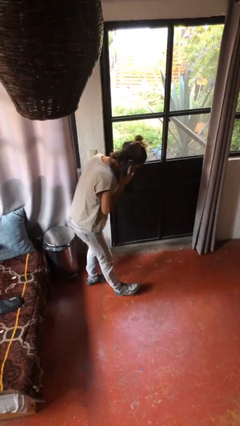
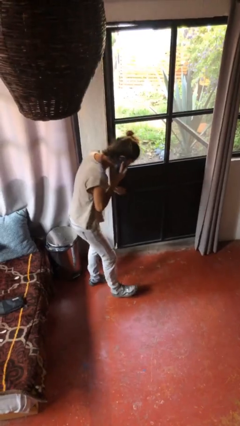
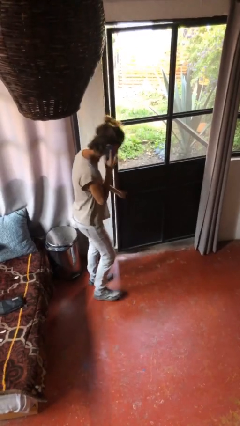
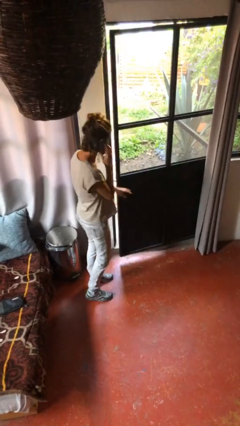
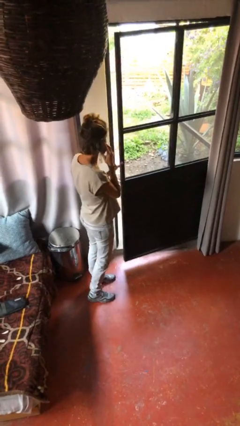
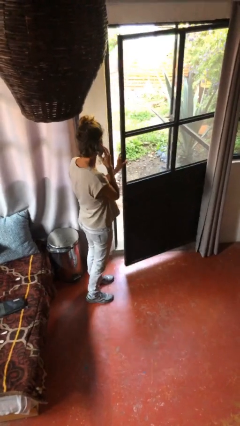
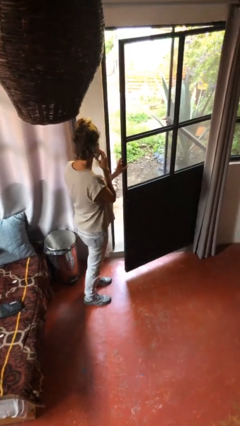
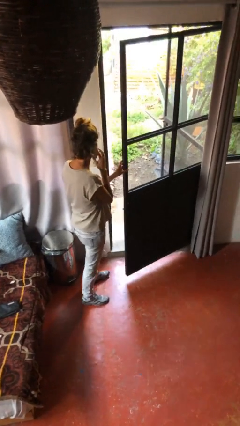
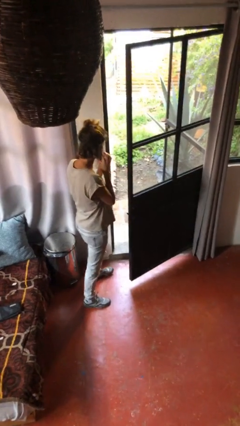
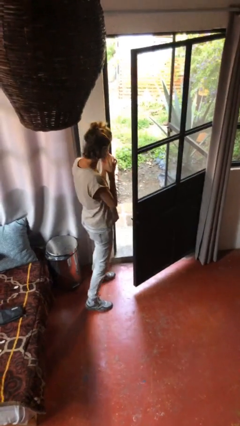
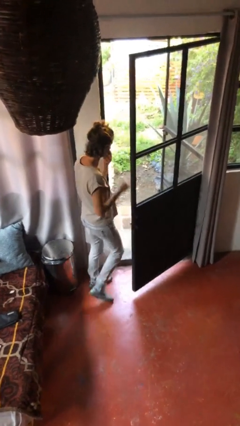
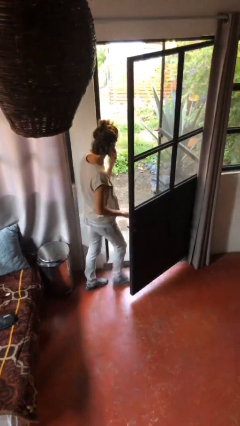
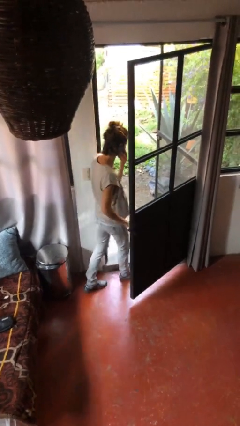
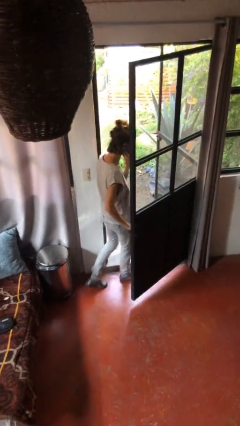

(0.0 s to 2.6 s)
person exits scene through structure

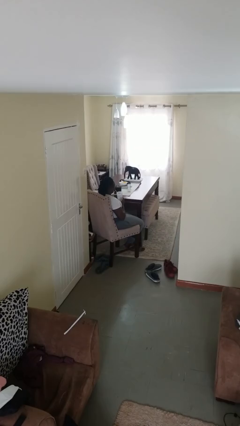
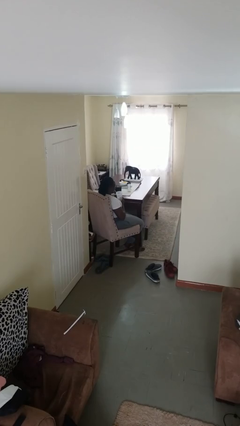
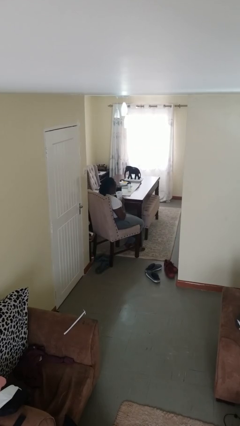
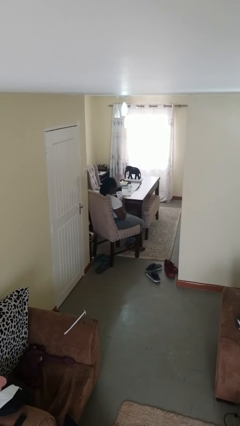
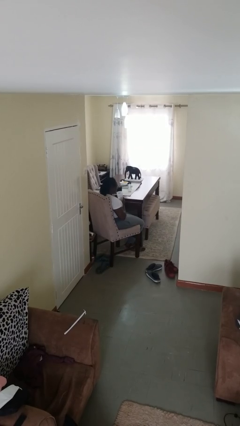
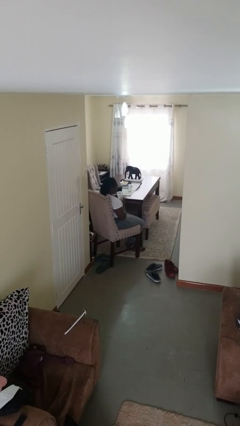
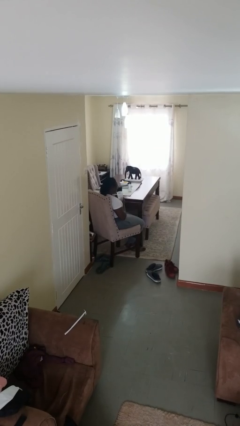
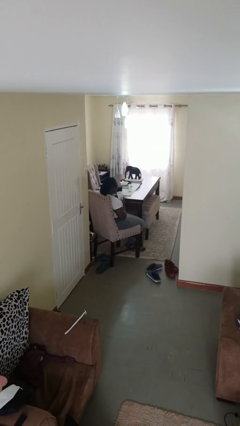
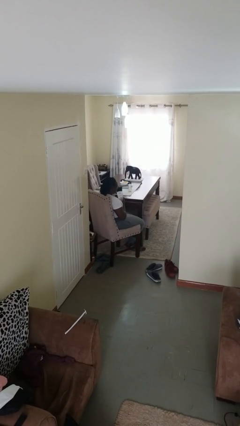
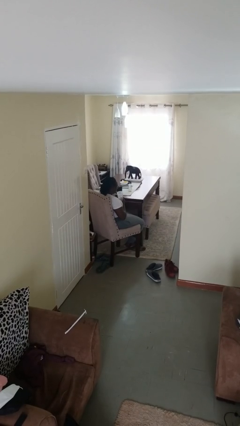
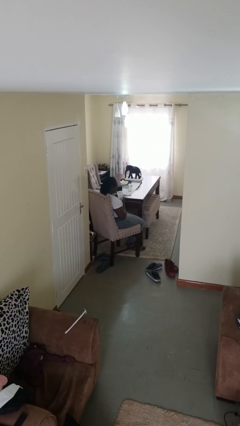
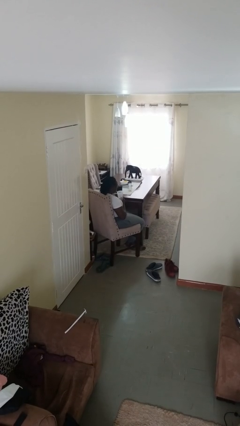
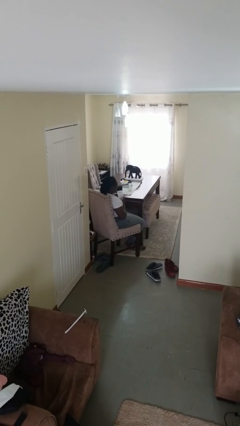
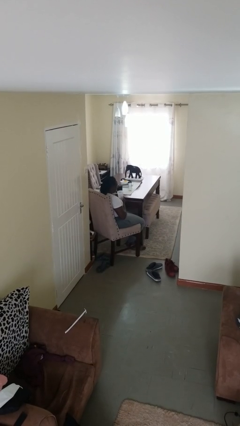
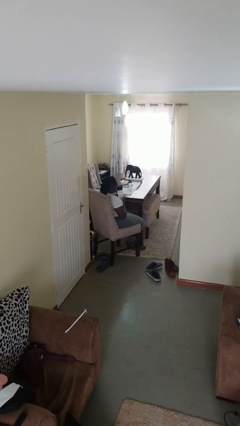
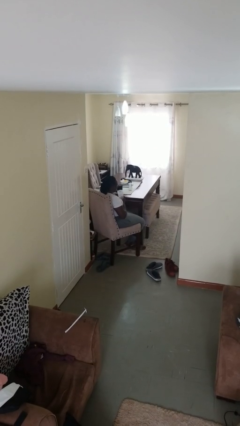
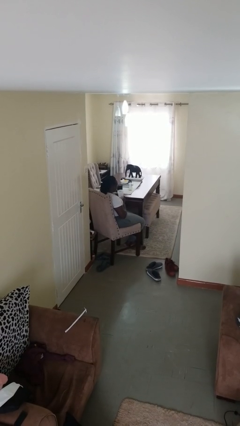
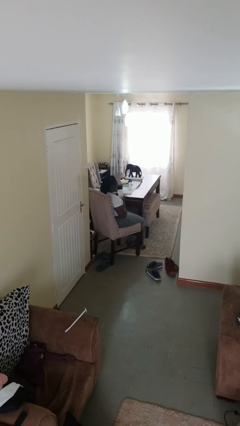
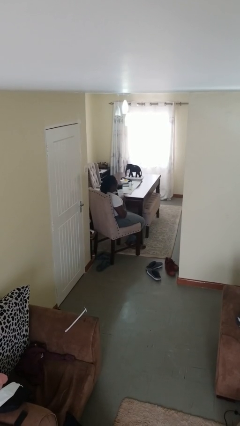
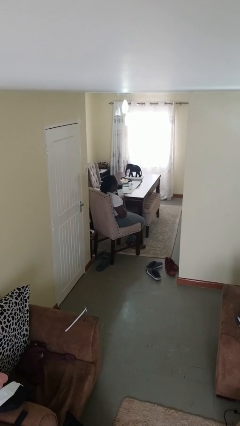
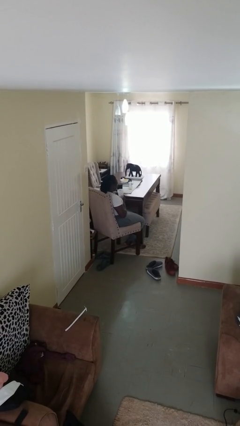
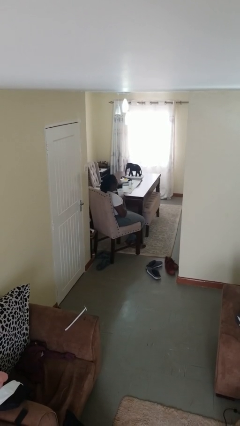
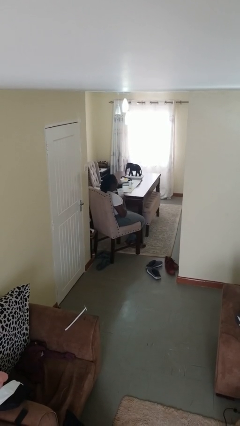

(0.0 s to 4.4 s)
person drinks from straw

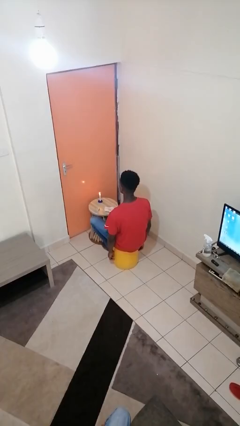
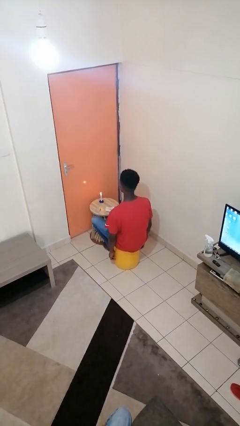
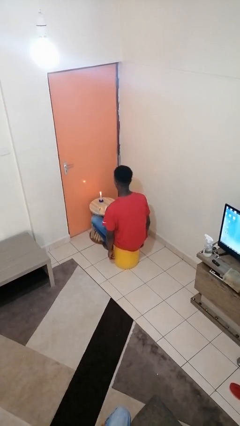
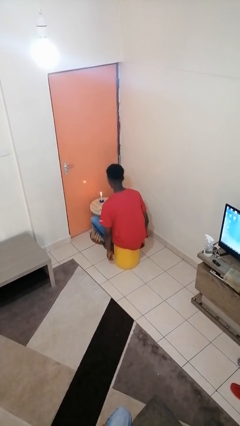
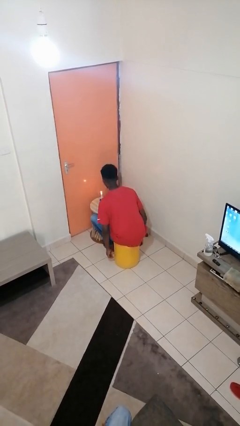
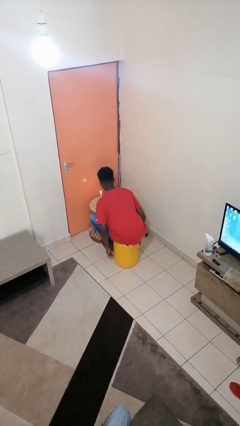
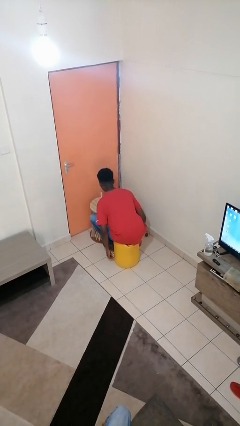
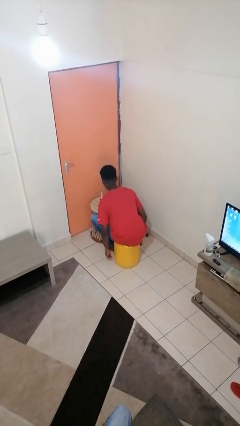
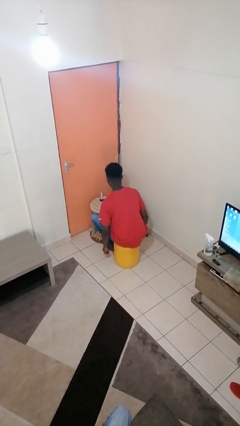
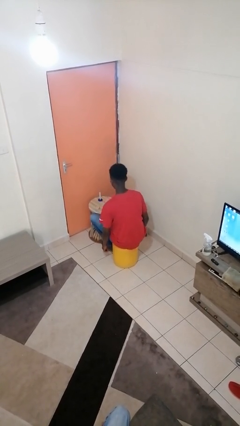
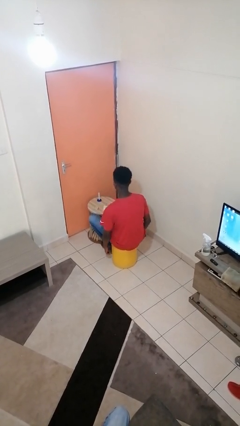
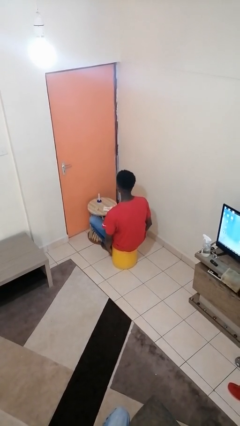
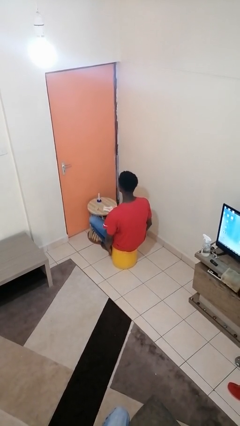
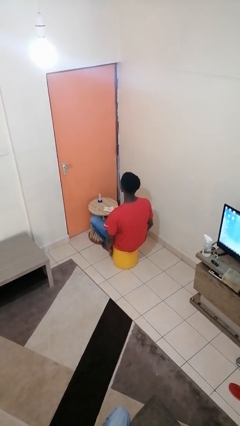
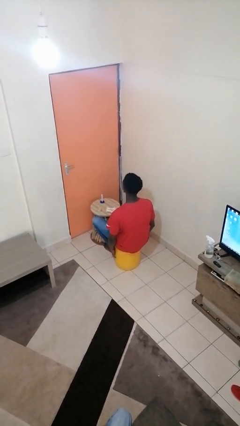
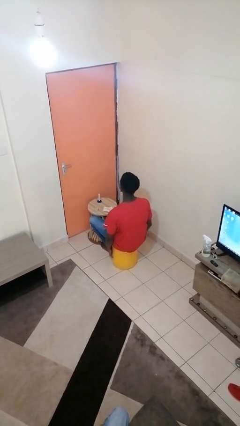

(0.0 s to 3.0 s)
person extinguishes candle

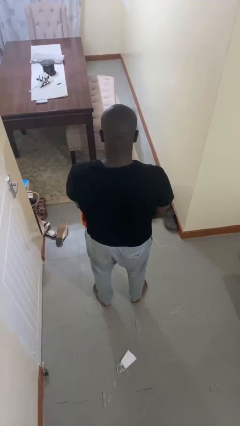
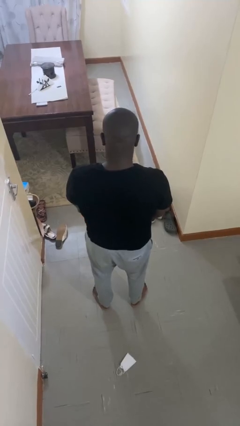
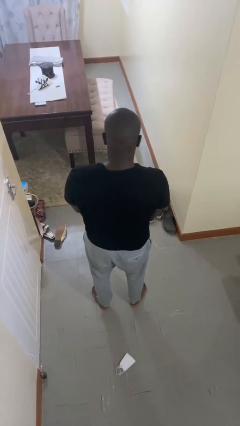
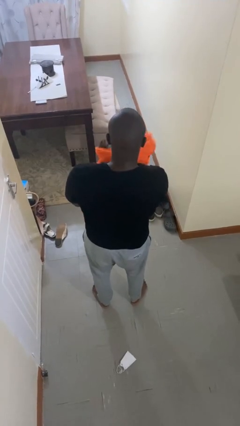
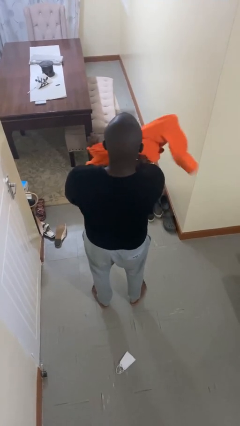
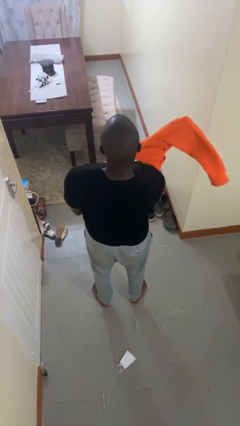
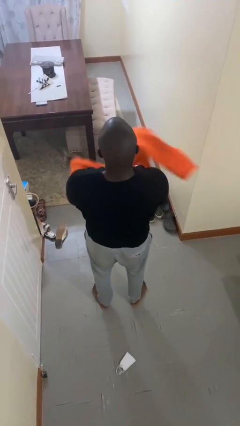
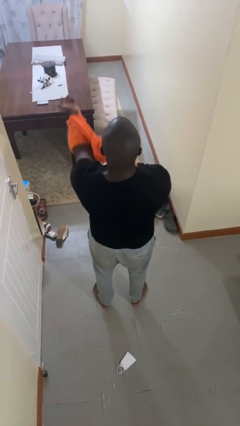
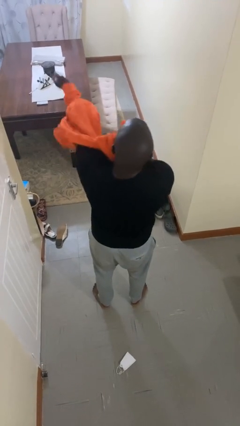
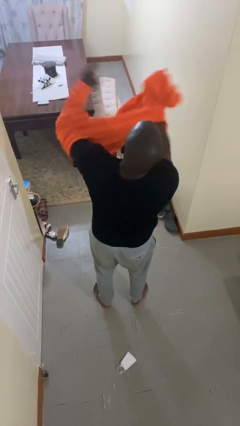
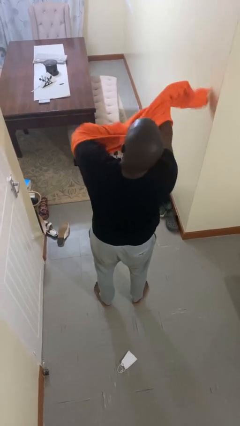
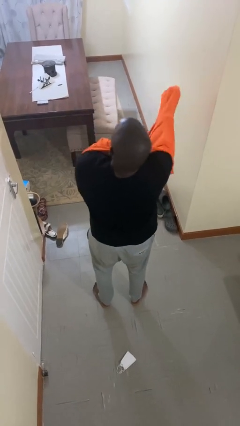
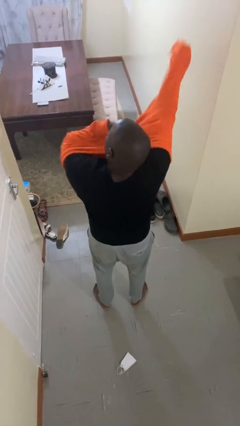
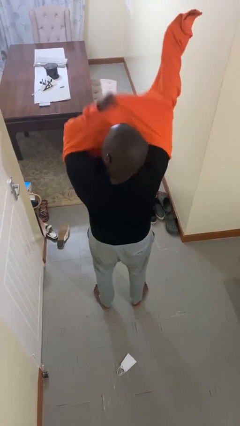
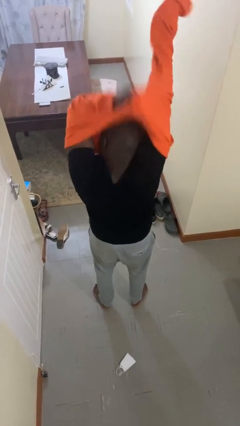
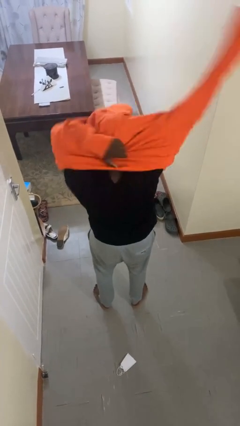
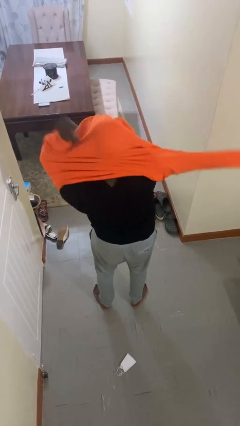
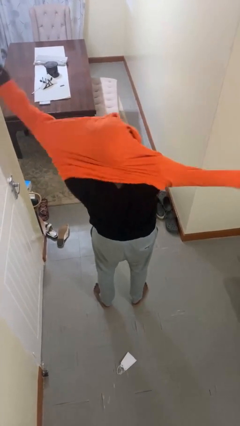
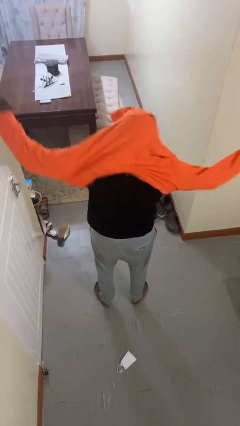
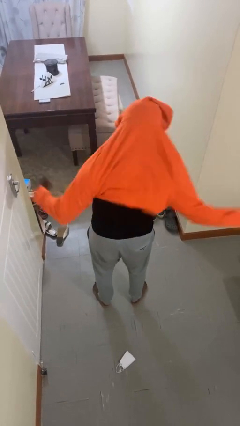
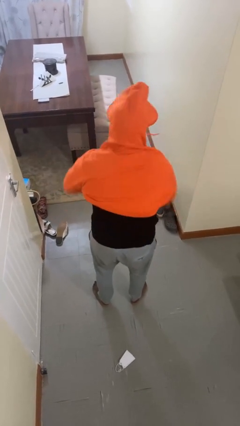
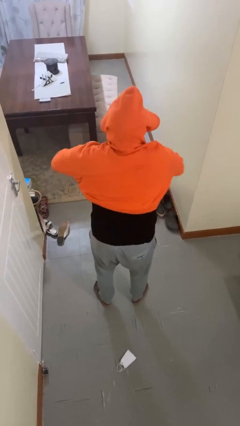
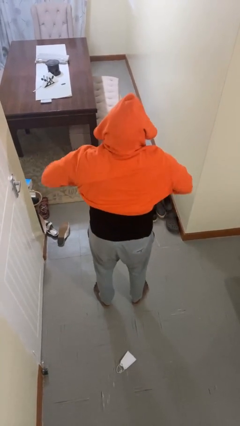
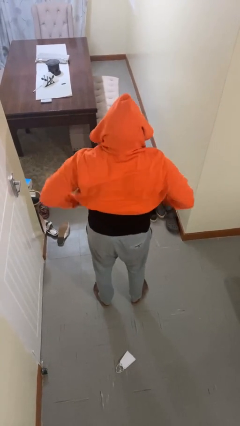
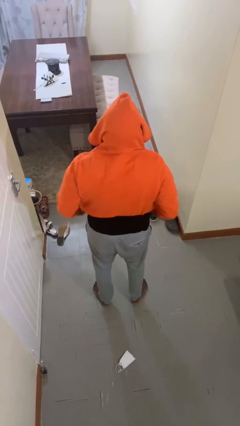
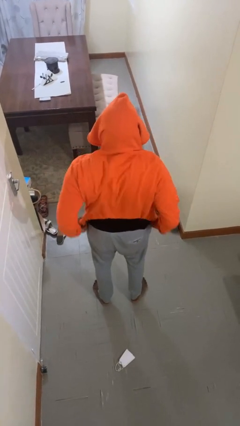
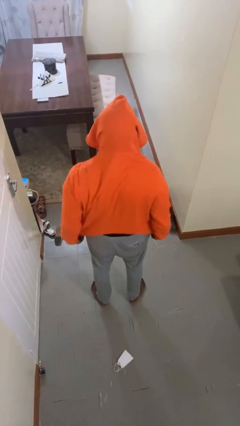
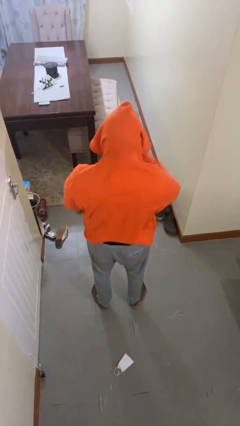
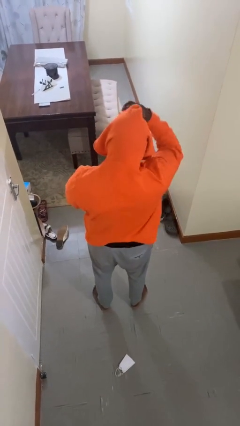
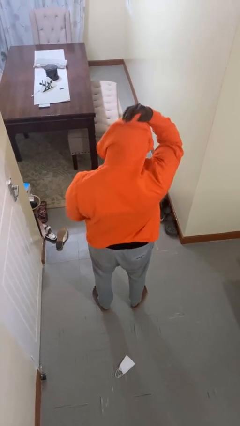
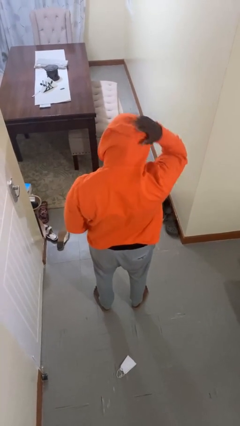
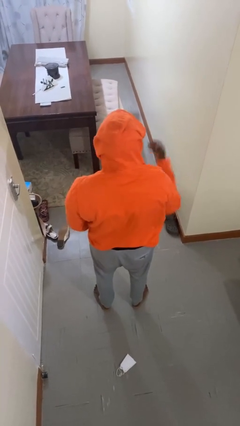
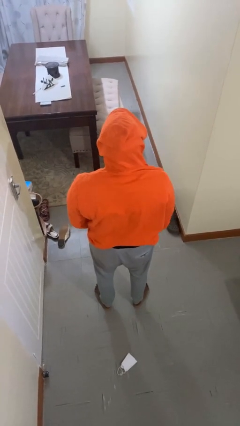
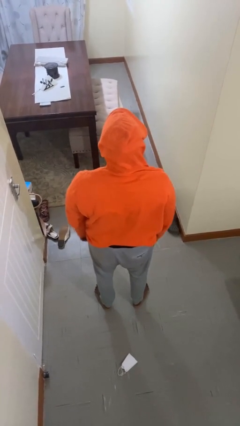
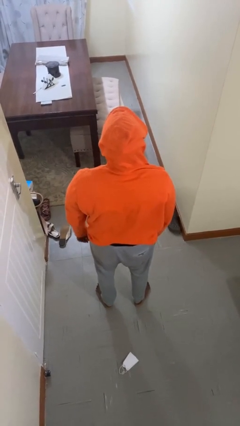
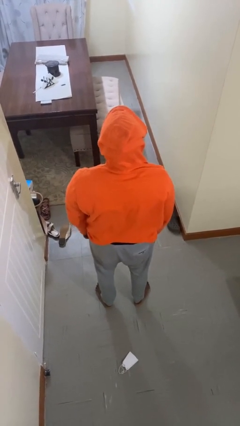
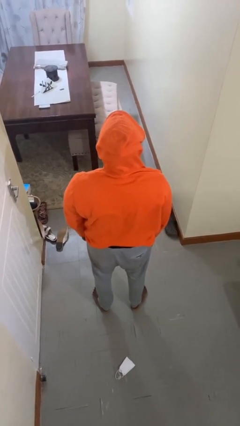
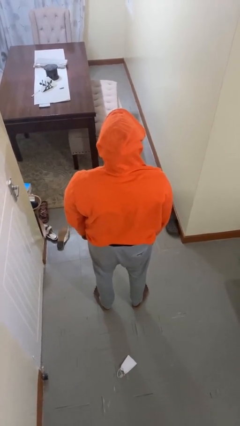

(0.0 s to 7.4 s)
person puts on hoodie

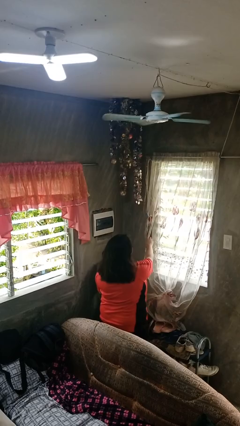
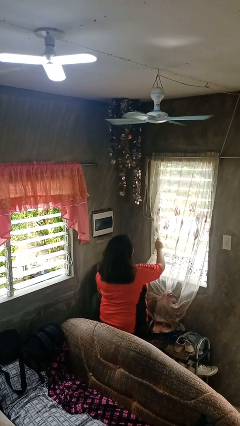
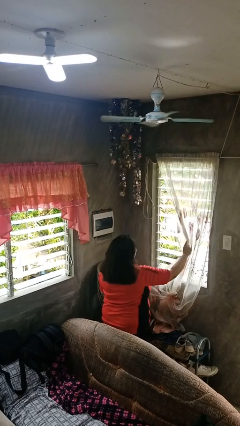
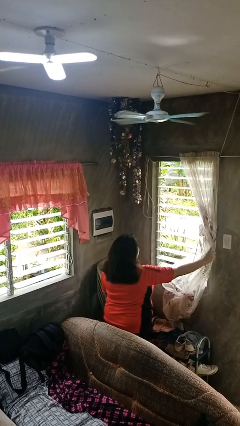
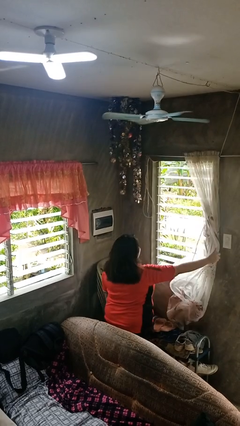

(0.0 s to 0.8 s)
person opens curtains
